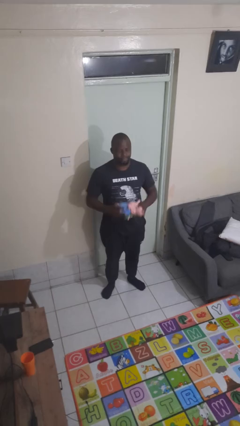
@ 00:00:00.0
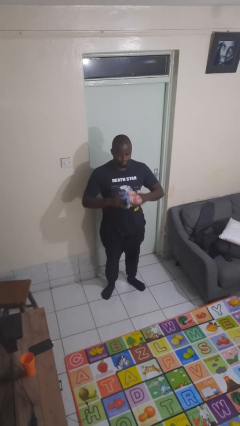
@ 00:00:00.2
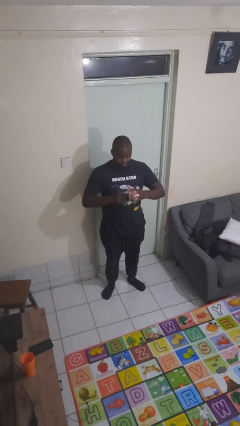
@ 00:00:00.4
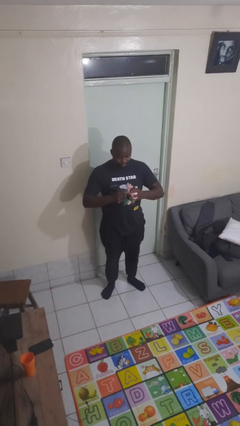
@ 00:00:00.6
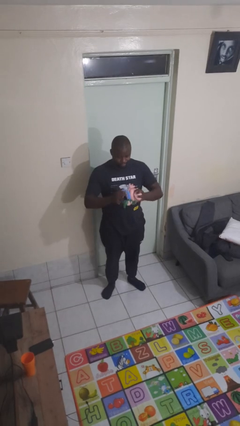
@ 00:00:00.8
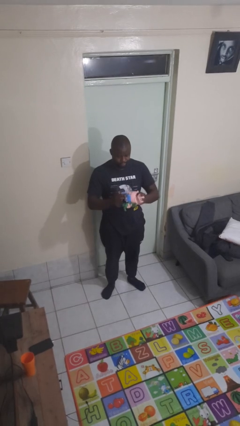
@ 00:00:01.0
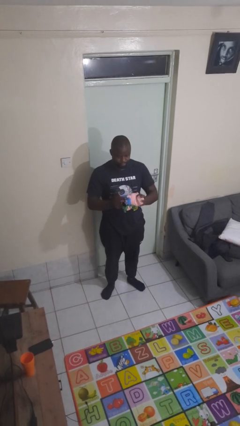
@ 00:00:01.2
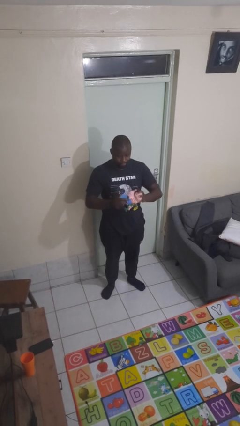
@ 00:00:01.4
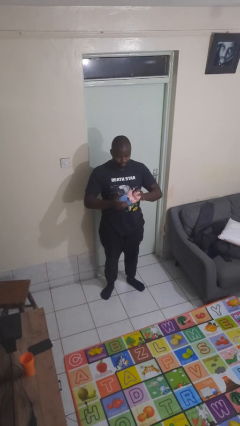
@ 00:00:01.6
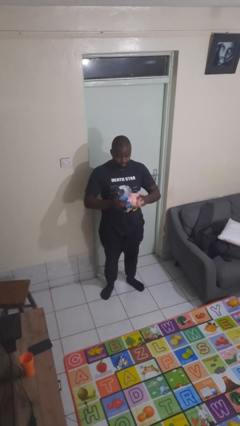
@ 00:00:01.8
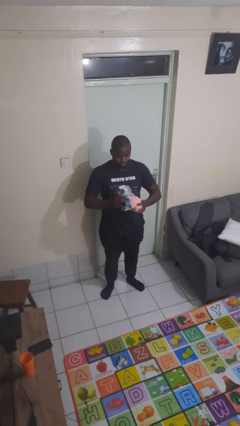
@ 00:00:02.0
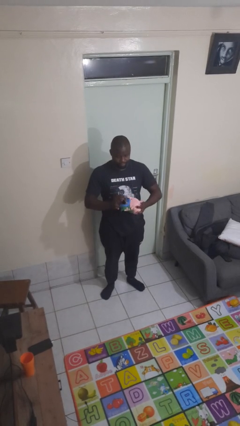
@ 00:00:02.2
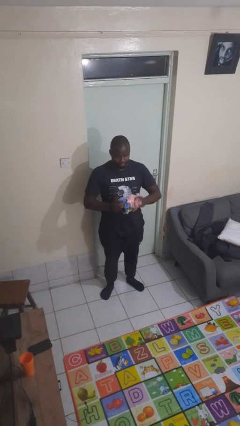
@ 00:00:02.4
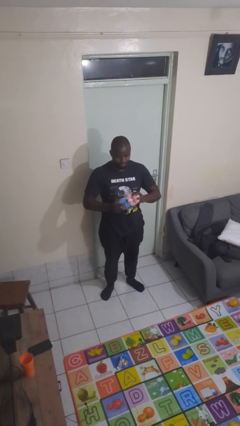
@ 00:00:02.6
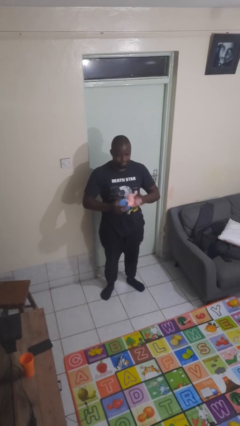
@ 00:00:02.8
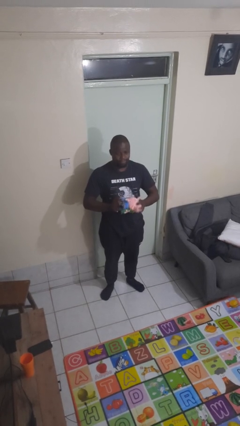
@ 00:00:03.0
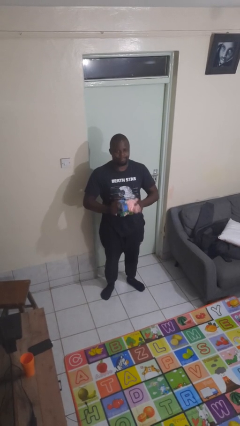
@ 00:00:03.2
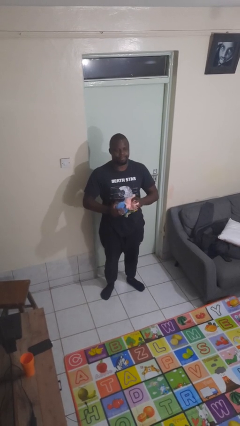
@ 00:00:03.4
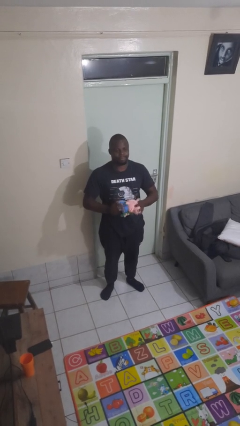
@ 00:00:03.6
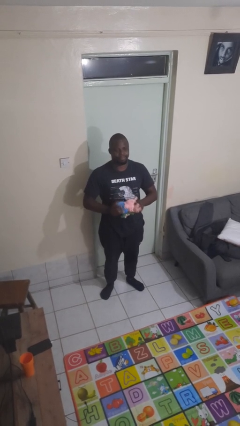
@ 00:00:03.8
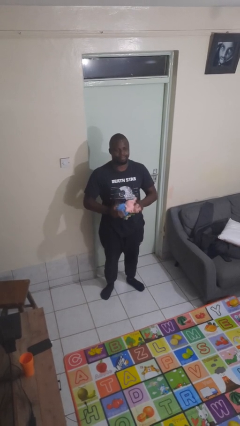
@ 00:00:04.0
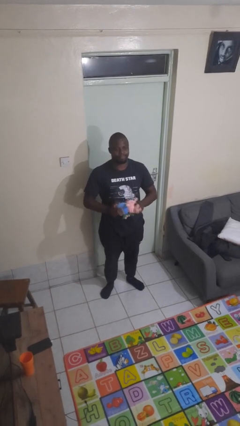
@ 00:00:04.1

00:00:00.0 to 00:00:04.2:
person squeezes object

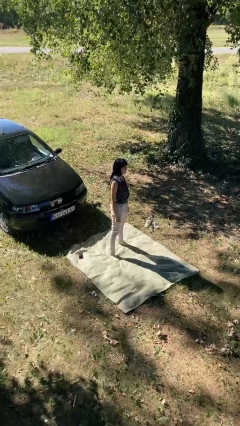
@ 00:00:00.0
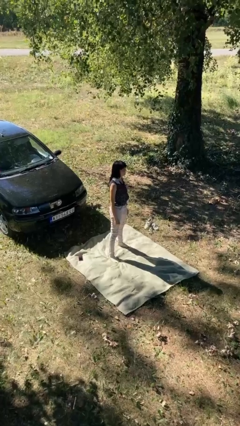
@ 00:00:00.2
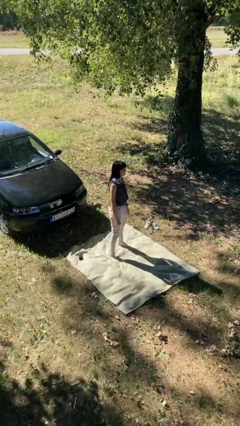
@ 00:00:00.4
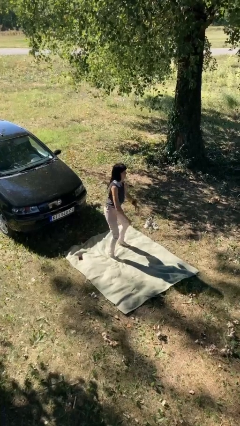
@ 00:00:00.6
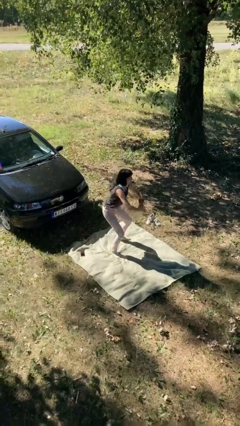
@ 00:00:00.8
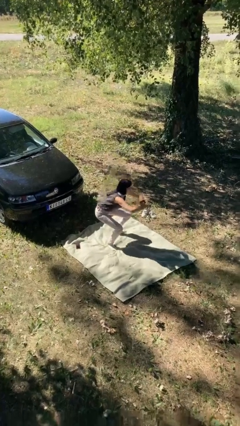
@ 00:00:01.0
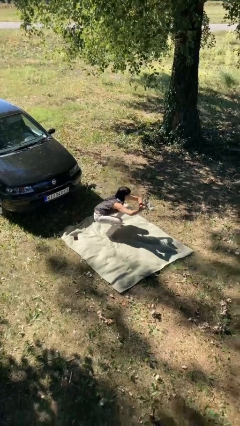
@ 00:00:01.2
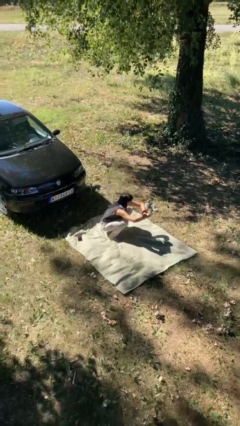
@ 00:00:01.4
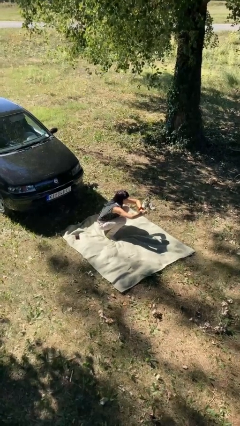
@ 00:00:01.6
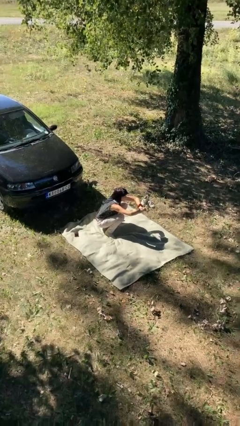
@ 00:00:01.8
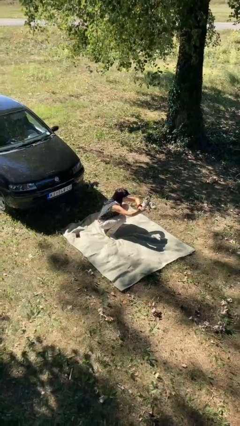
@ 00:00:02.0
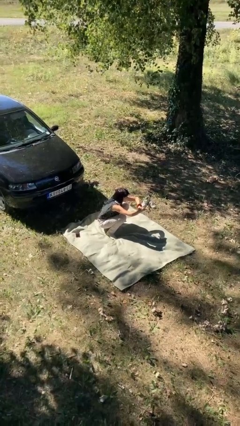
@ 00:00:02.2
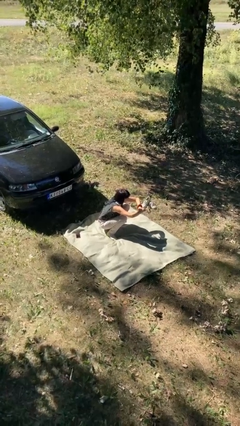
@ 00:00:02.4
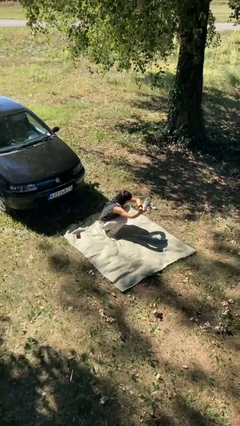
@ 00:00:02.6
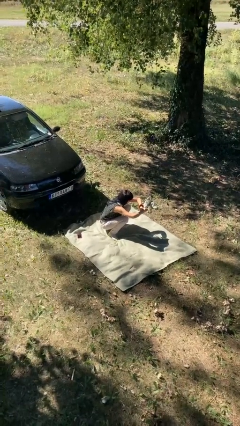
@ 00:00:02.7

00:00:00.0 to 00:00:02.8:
person squats

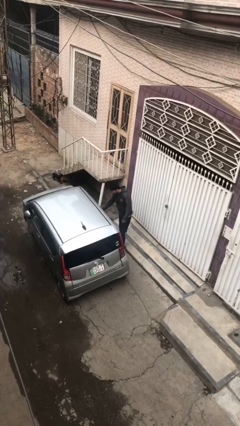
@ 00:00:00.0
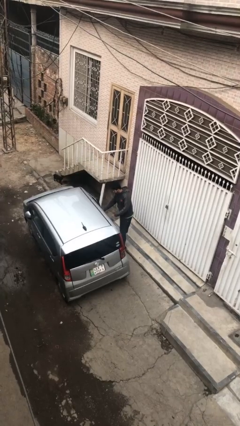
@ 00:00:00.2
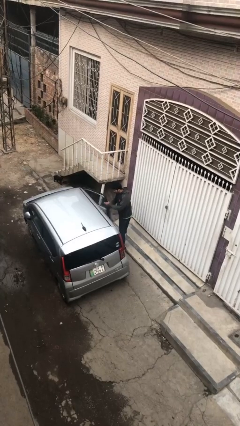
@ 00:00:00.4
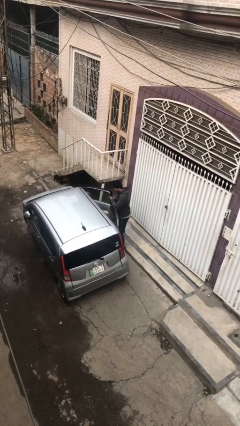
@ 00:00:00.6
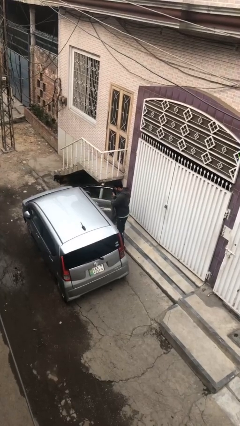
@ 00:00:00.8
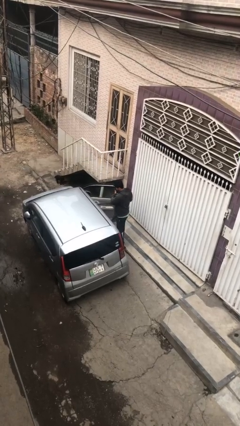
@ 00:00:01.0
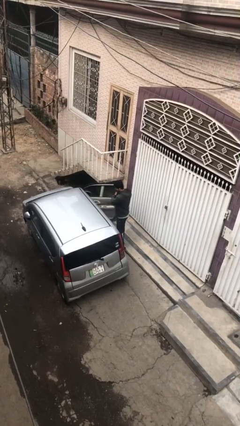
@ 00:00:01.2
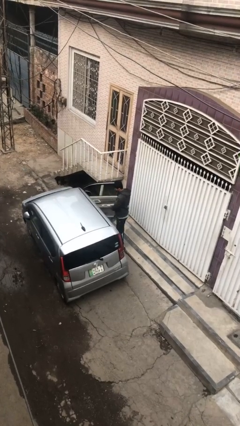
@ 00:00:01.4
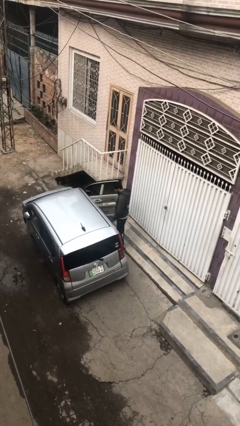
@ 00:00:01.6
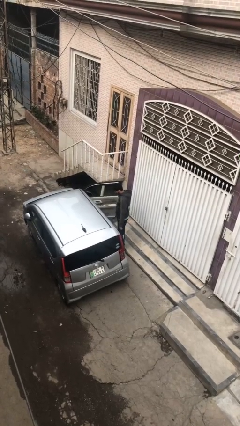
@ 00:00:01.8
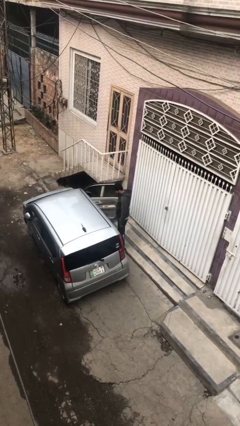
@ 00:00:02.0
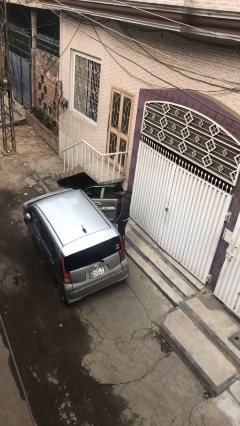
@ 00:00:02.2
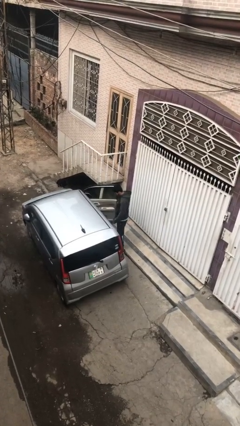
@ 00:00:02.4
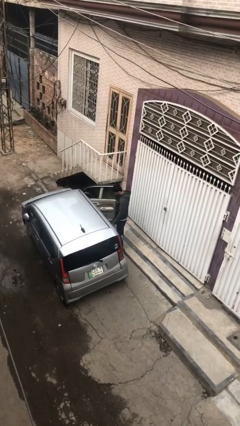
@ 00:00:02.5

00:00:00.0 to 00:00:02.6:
person opens car door

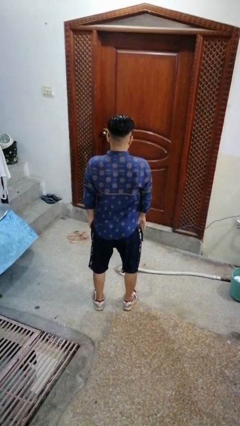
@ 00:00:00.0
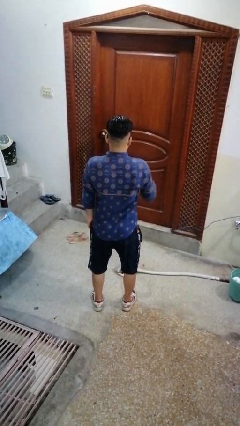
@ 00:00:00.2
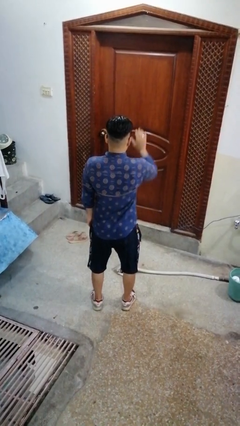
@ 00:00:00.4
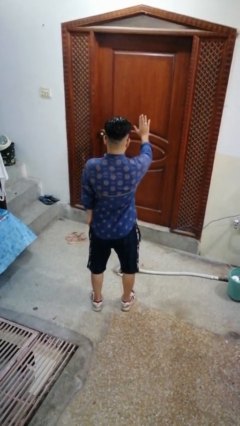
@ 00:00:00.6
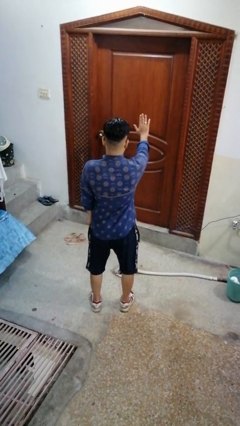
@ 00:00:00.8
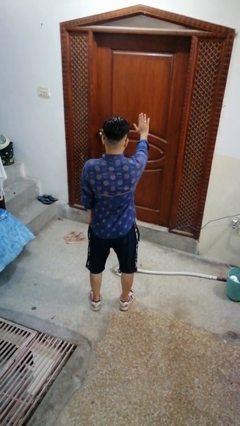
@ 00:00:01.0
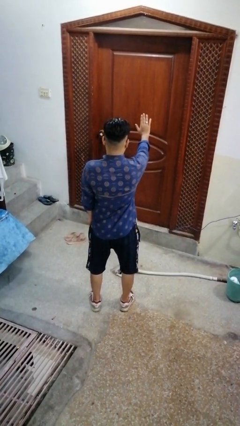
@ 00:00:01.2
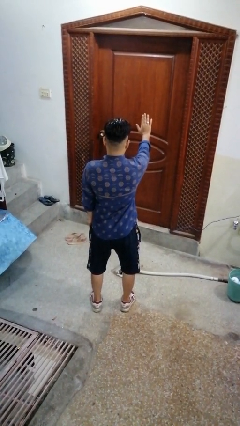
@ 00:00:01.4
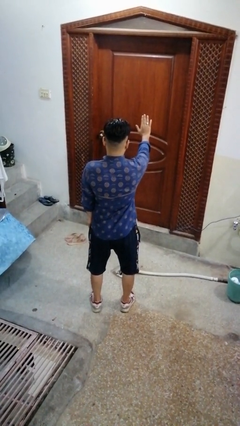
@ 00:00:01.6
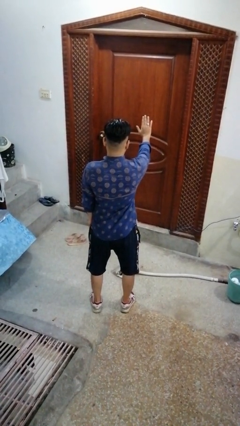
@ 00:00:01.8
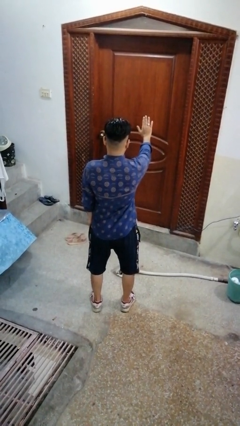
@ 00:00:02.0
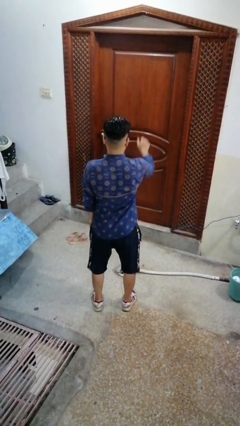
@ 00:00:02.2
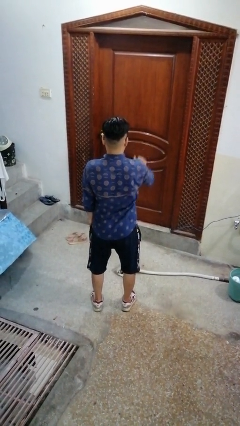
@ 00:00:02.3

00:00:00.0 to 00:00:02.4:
person gestures stop

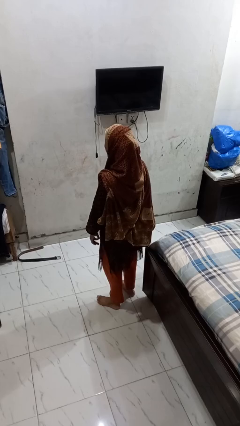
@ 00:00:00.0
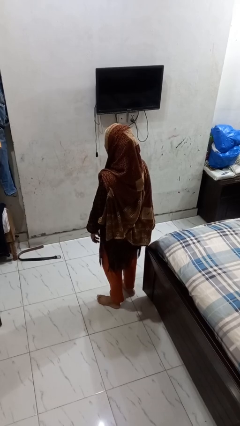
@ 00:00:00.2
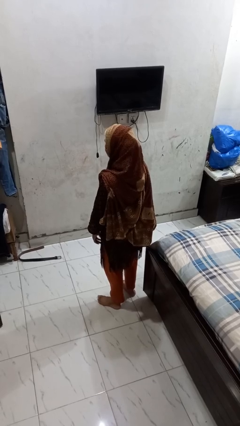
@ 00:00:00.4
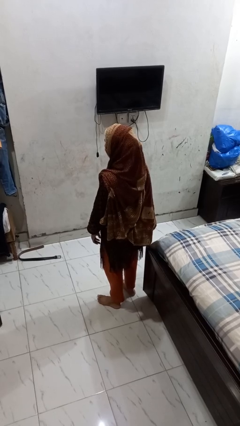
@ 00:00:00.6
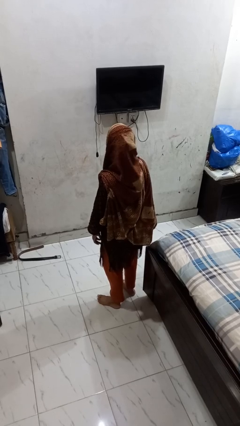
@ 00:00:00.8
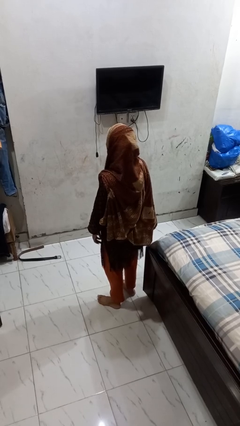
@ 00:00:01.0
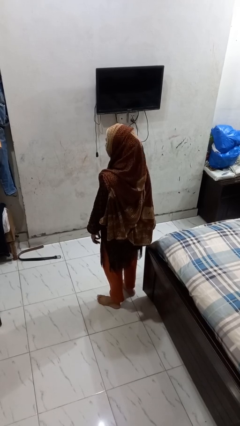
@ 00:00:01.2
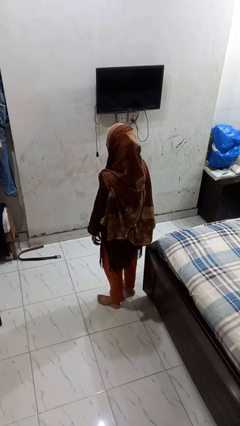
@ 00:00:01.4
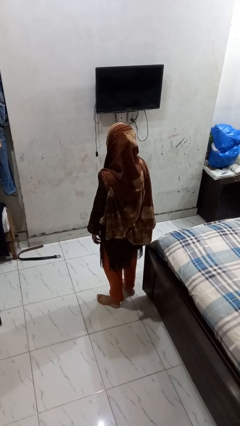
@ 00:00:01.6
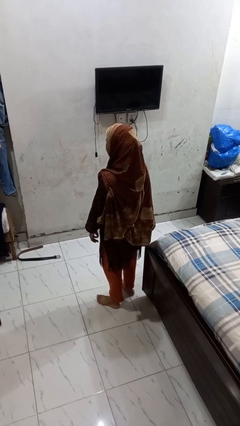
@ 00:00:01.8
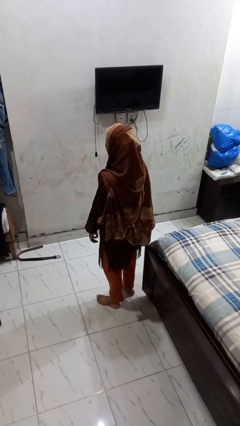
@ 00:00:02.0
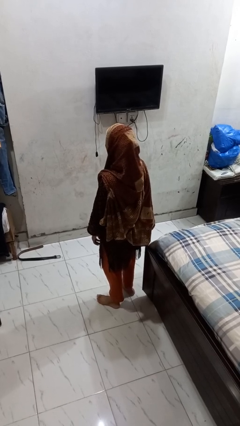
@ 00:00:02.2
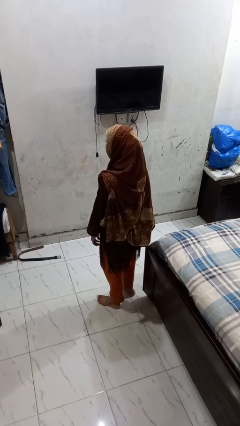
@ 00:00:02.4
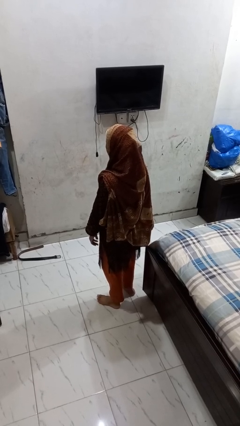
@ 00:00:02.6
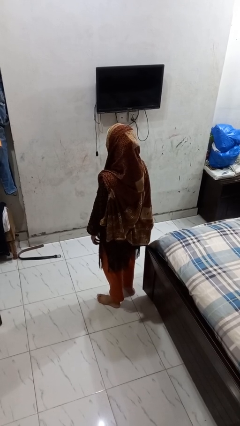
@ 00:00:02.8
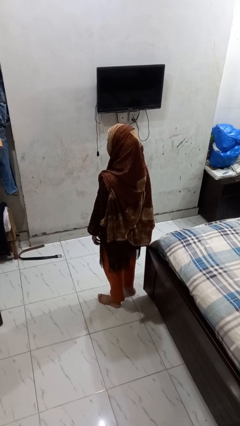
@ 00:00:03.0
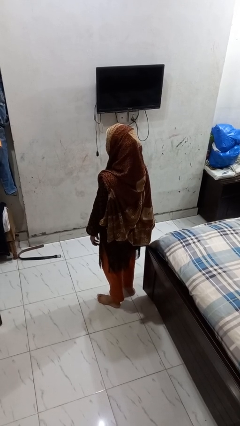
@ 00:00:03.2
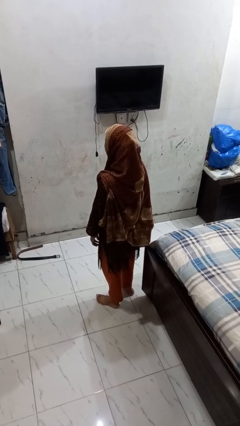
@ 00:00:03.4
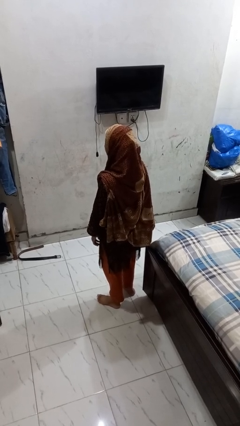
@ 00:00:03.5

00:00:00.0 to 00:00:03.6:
person shakes head

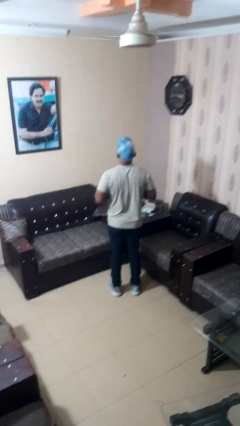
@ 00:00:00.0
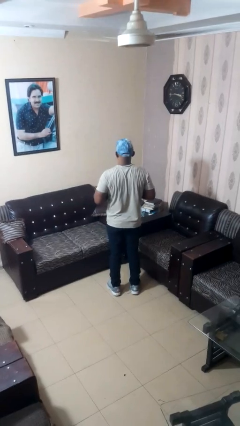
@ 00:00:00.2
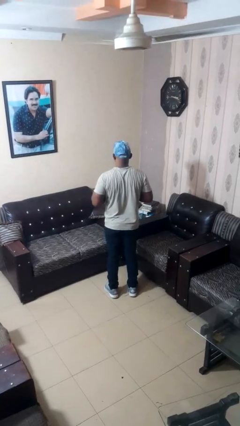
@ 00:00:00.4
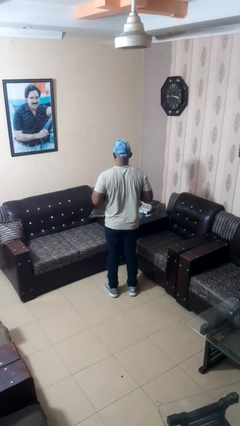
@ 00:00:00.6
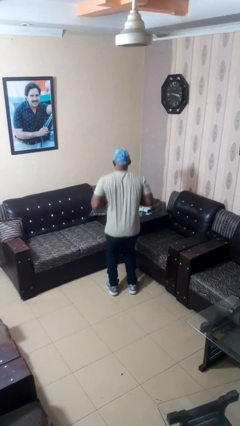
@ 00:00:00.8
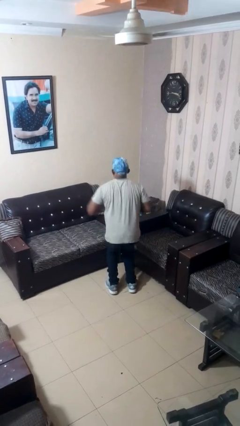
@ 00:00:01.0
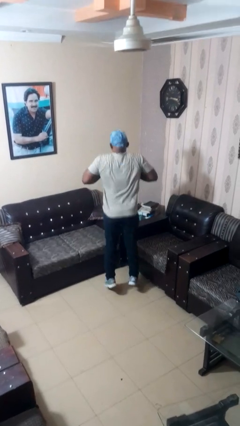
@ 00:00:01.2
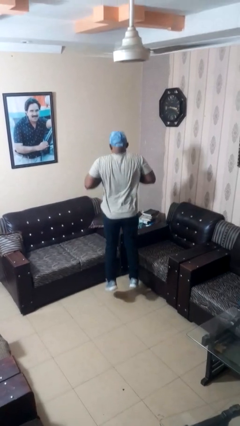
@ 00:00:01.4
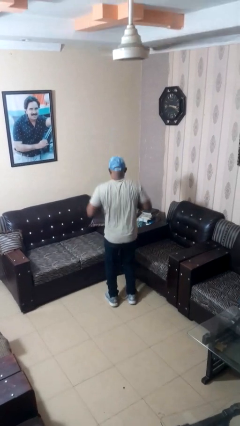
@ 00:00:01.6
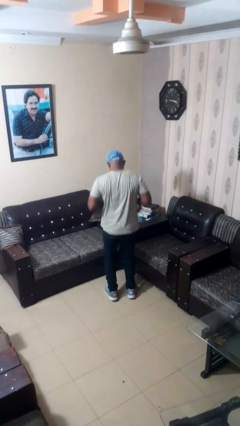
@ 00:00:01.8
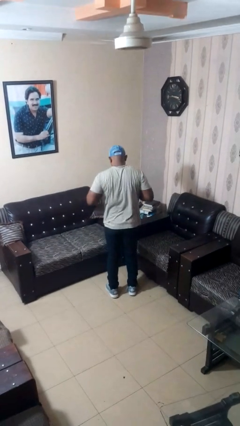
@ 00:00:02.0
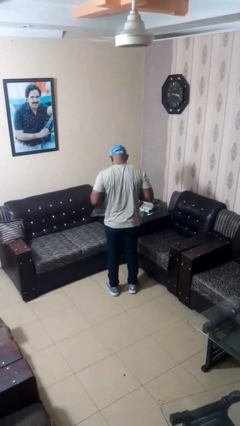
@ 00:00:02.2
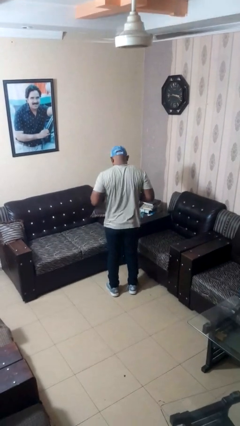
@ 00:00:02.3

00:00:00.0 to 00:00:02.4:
person jumps
